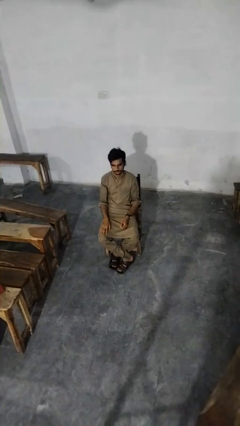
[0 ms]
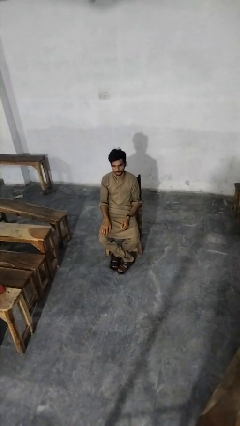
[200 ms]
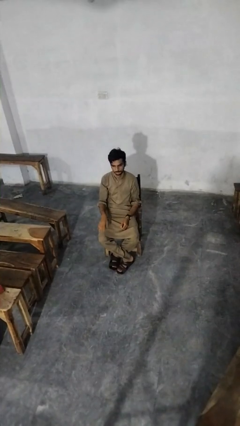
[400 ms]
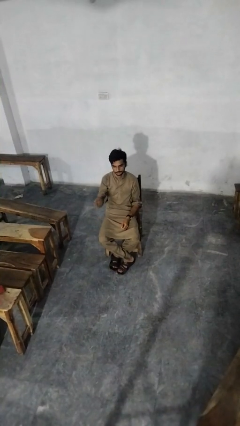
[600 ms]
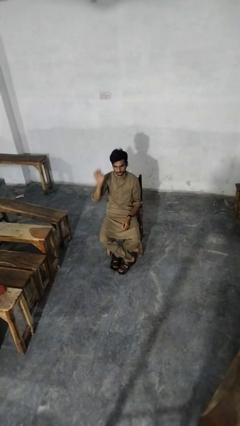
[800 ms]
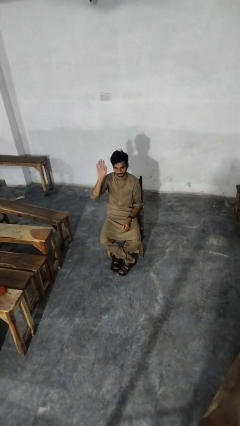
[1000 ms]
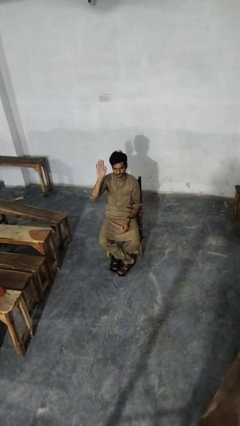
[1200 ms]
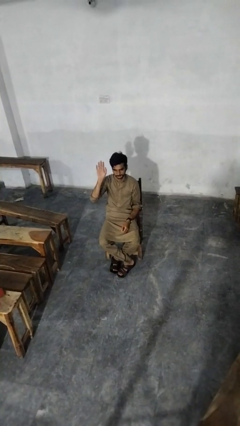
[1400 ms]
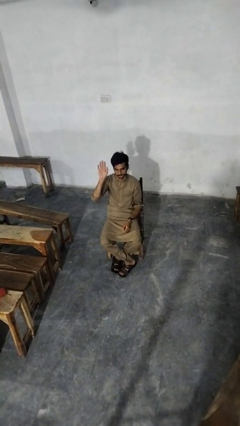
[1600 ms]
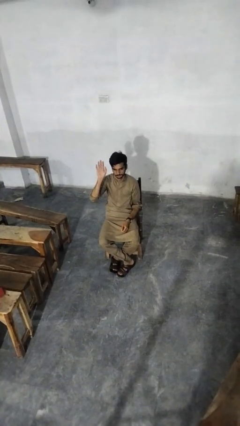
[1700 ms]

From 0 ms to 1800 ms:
person gestures raise hand

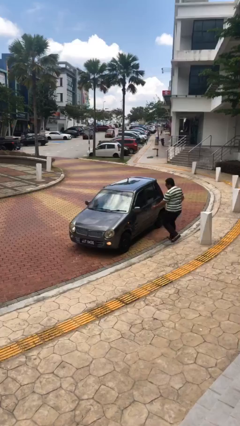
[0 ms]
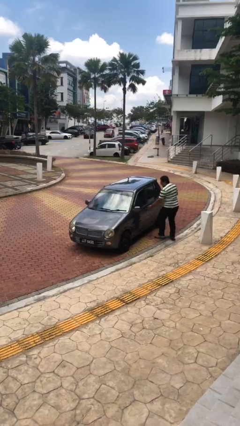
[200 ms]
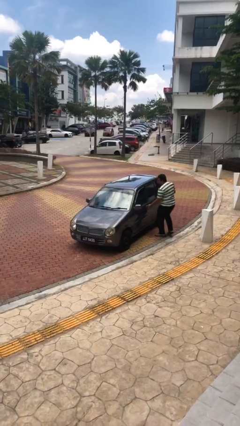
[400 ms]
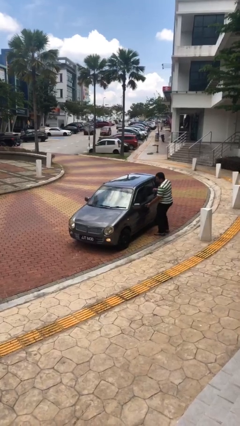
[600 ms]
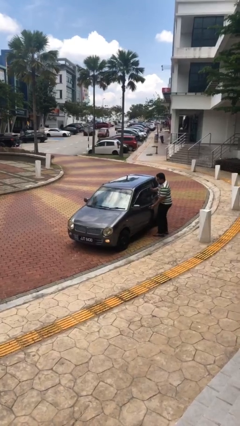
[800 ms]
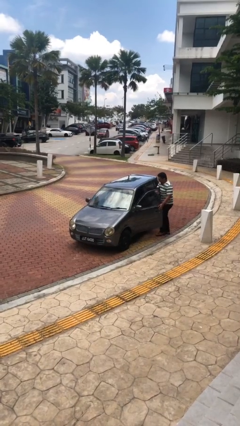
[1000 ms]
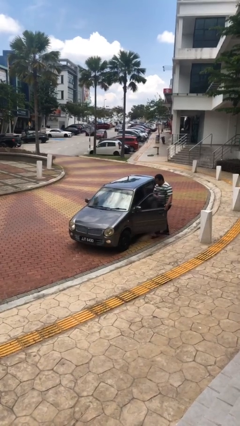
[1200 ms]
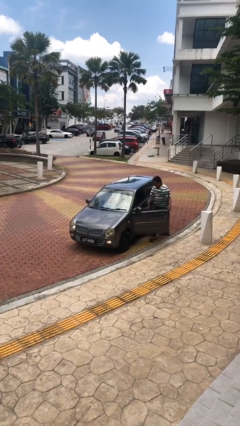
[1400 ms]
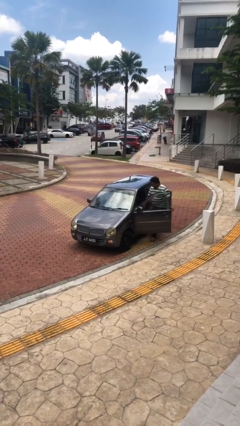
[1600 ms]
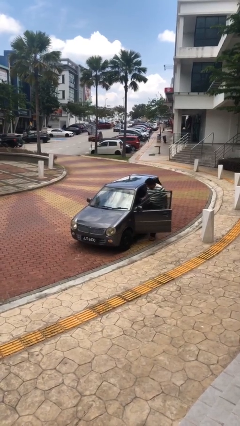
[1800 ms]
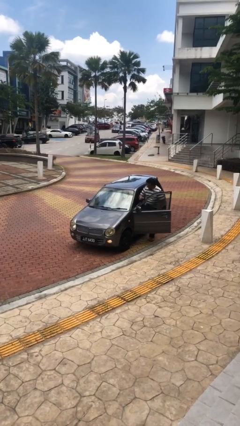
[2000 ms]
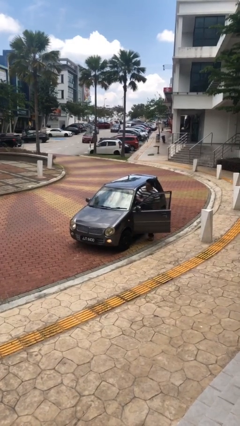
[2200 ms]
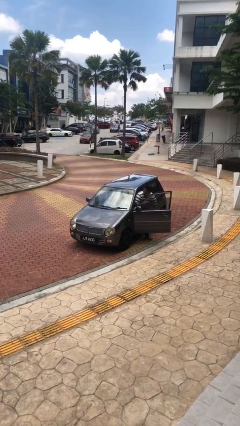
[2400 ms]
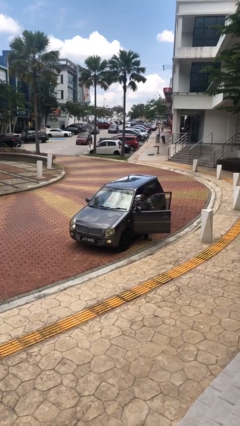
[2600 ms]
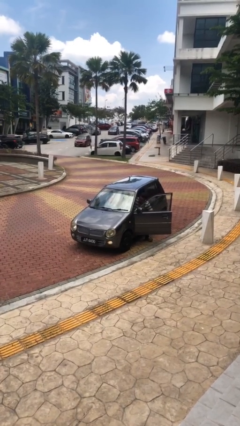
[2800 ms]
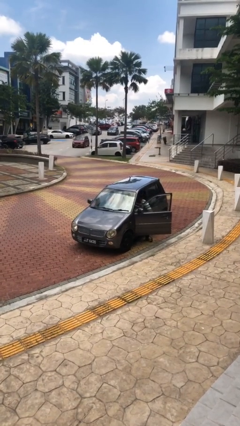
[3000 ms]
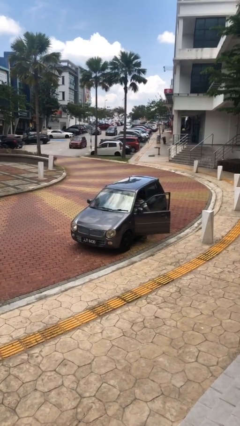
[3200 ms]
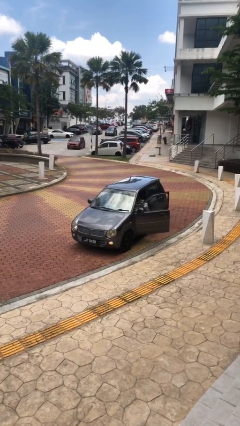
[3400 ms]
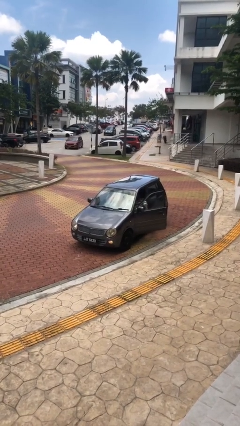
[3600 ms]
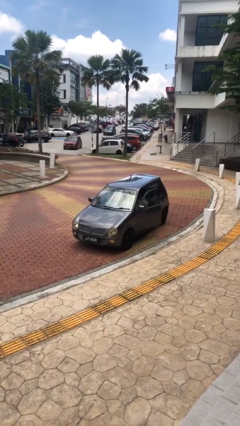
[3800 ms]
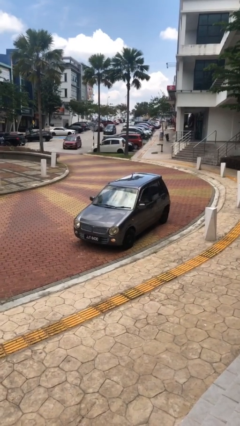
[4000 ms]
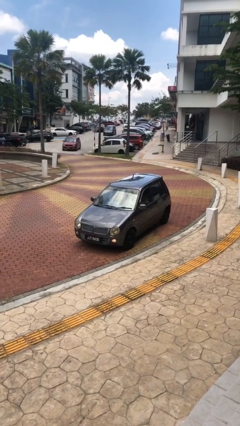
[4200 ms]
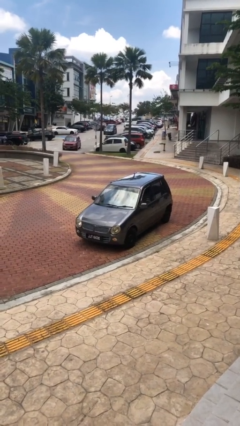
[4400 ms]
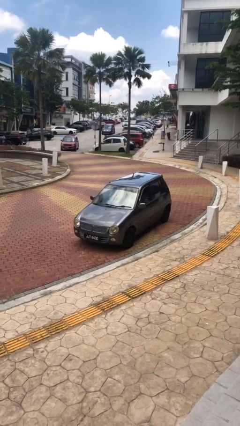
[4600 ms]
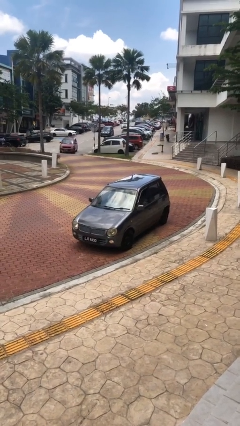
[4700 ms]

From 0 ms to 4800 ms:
car picks up person

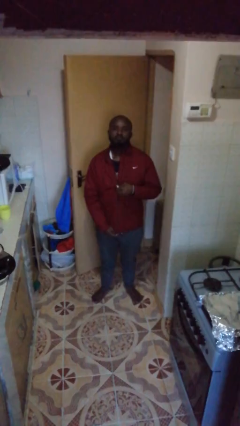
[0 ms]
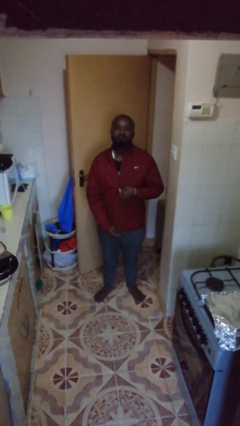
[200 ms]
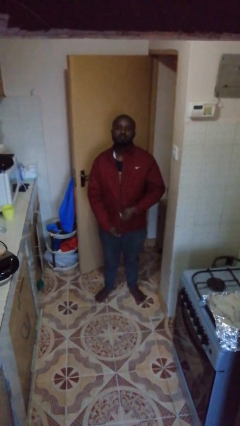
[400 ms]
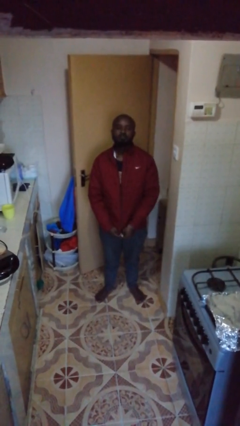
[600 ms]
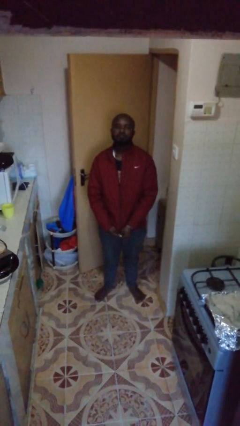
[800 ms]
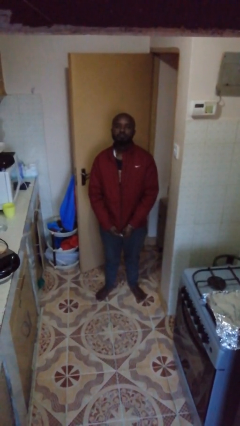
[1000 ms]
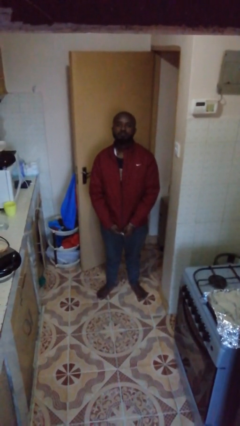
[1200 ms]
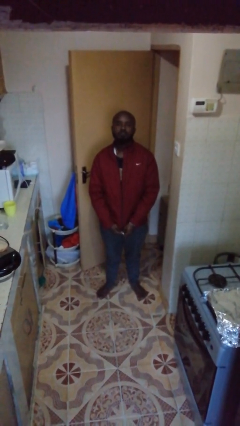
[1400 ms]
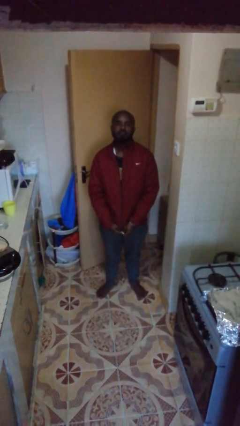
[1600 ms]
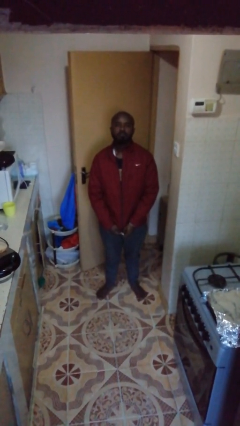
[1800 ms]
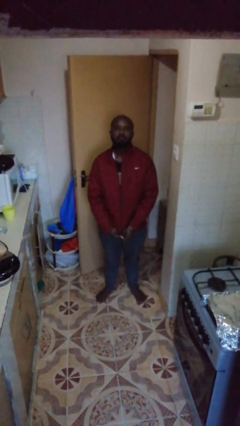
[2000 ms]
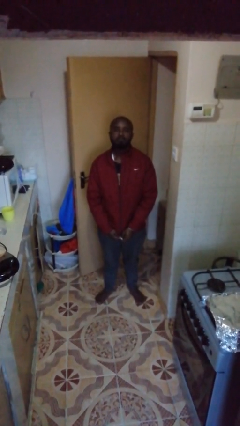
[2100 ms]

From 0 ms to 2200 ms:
person unzips jacket

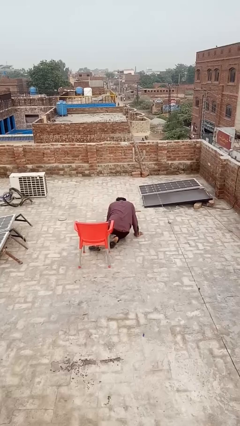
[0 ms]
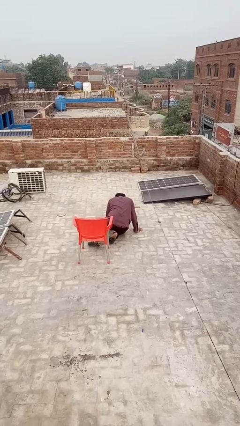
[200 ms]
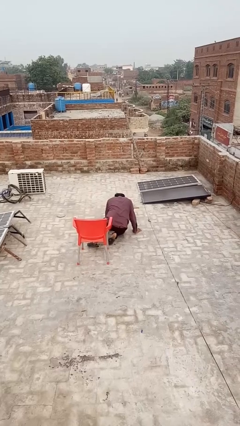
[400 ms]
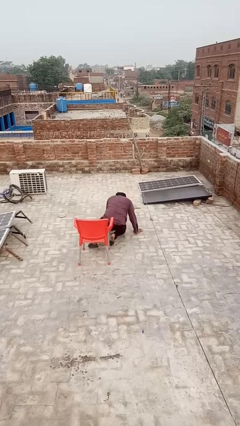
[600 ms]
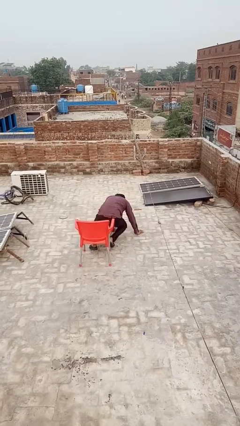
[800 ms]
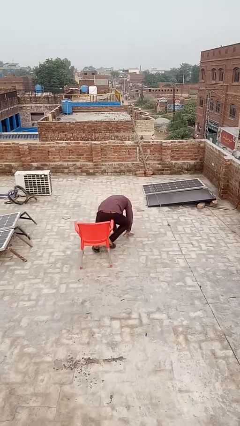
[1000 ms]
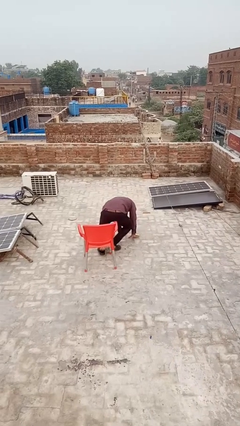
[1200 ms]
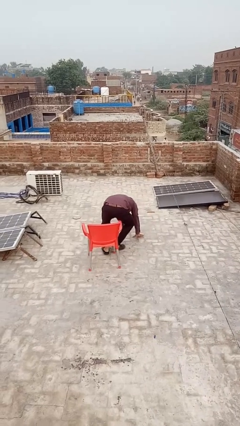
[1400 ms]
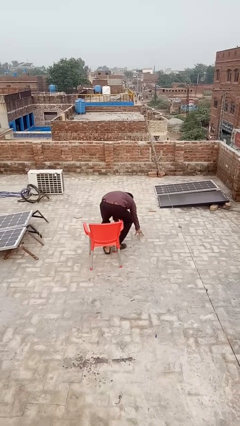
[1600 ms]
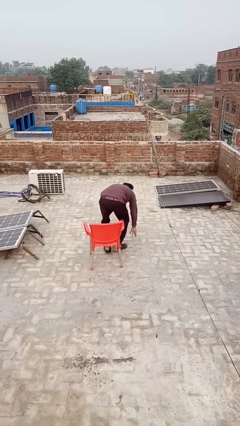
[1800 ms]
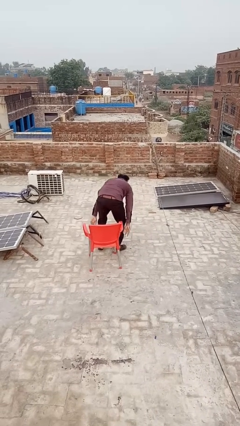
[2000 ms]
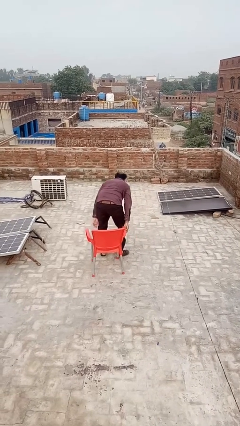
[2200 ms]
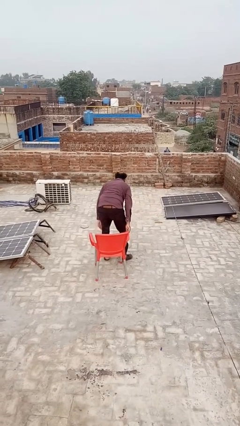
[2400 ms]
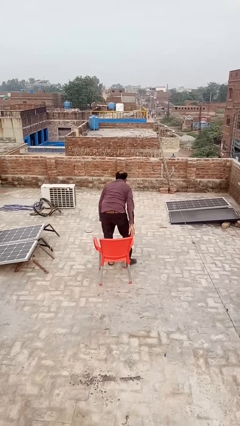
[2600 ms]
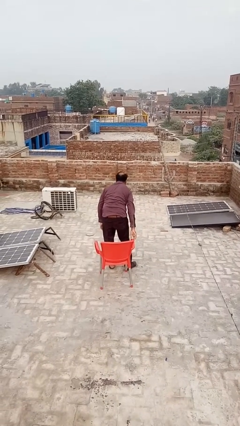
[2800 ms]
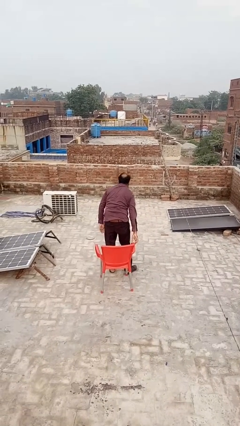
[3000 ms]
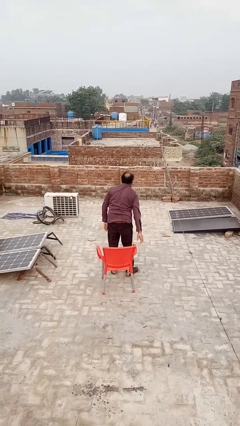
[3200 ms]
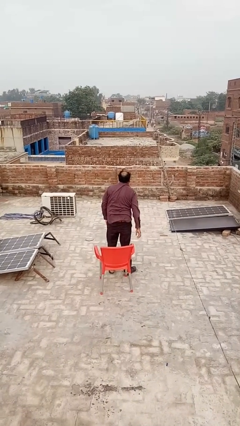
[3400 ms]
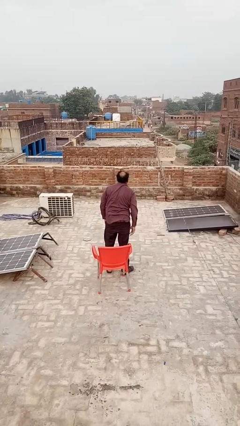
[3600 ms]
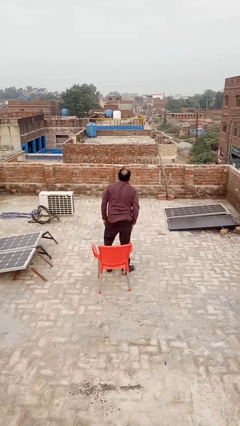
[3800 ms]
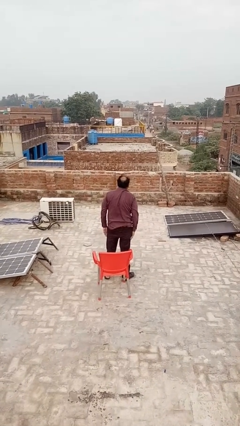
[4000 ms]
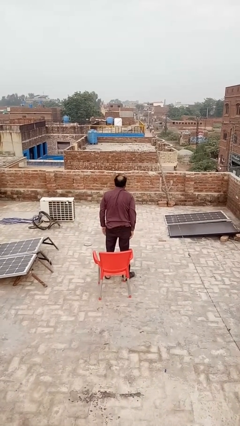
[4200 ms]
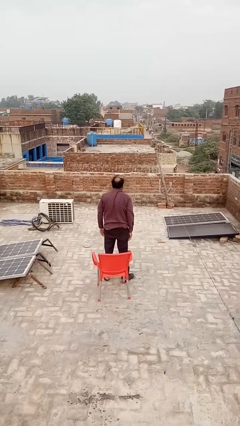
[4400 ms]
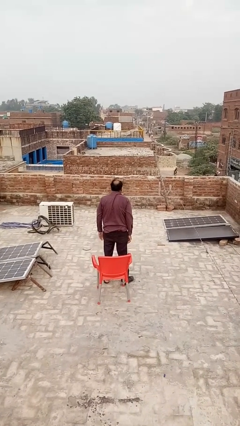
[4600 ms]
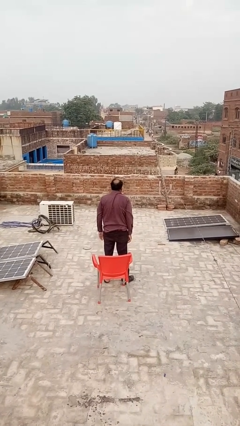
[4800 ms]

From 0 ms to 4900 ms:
person stands up from floor

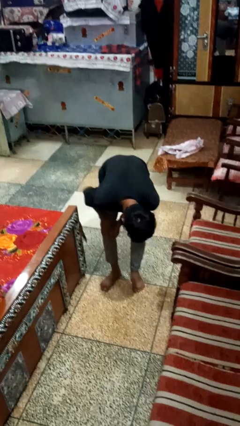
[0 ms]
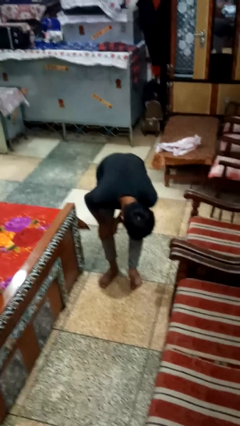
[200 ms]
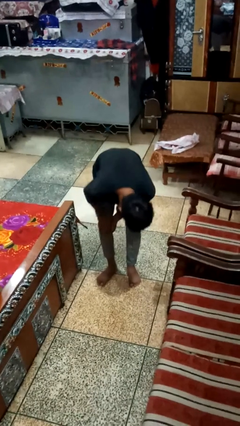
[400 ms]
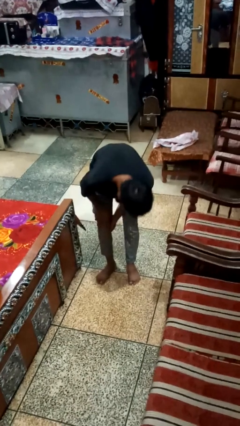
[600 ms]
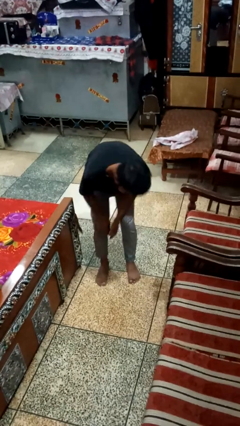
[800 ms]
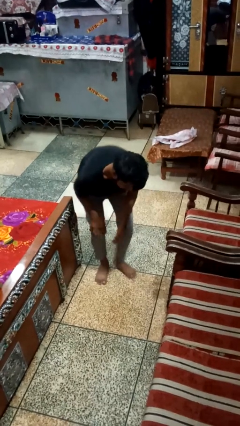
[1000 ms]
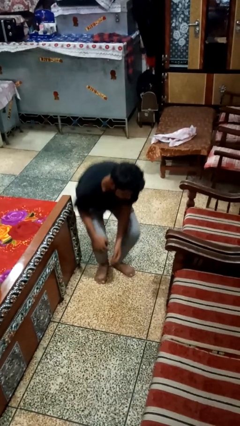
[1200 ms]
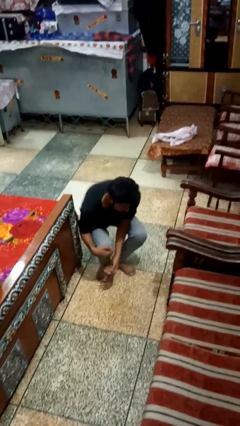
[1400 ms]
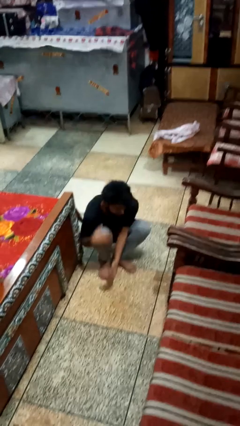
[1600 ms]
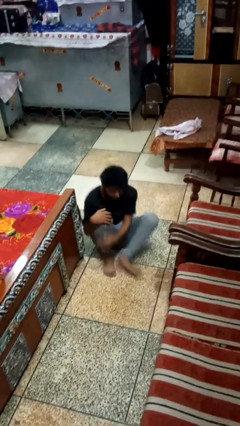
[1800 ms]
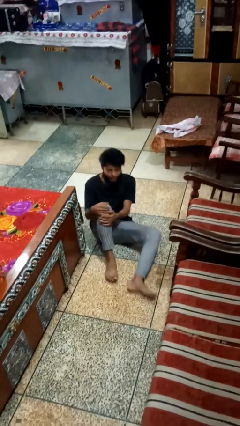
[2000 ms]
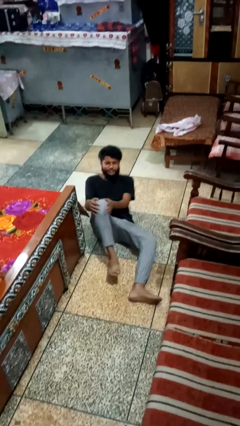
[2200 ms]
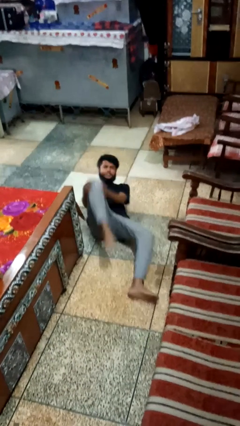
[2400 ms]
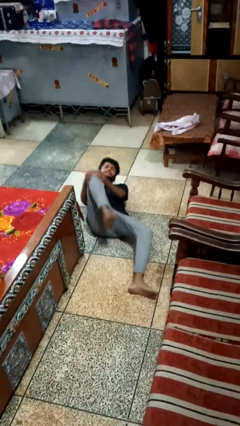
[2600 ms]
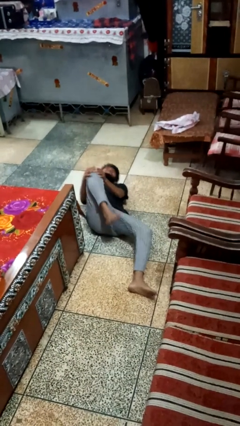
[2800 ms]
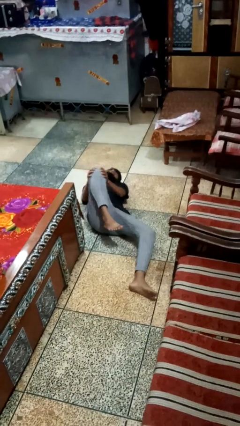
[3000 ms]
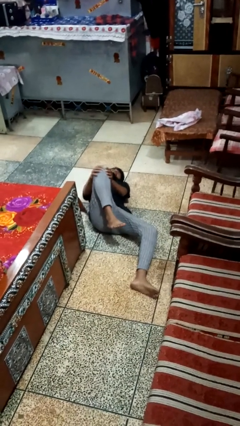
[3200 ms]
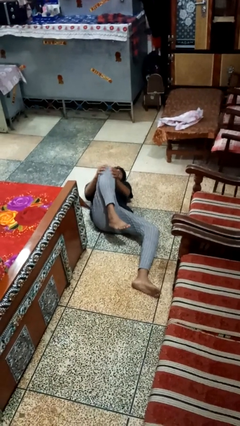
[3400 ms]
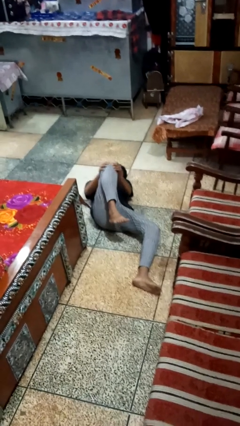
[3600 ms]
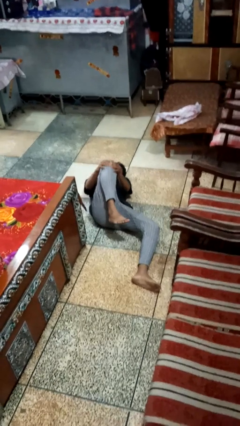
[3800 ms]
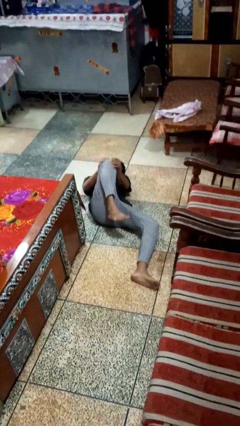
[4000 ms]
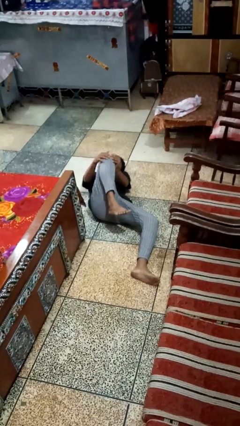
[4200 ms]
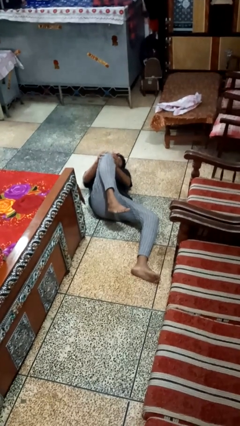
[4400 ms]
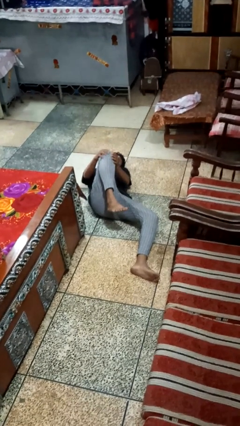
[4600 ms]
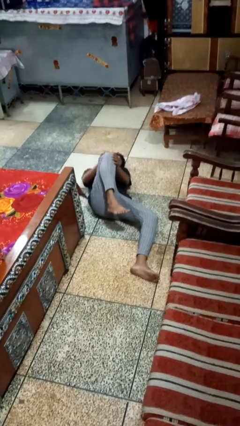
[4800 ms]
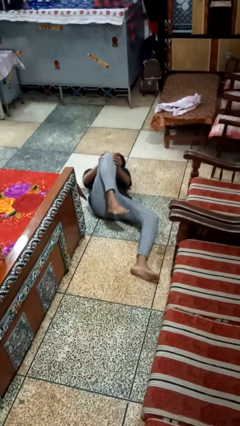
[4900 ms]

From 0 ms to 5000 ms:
person lies down on floor
